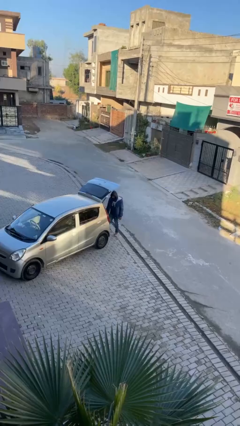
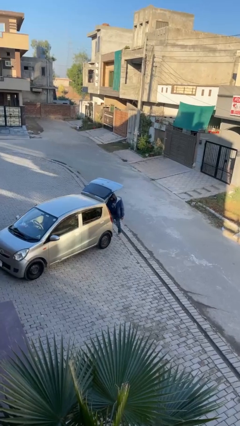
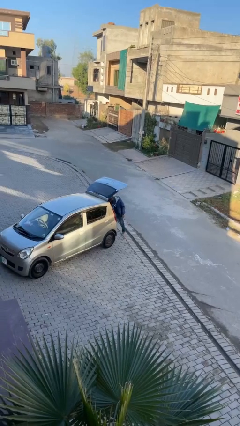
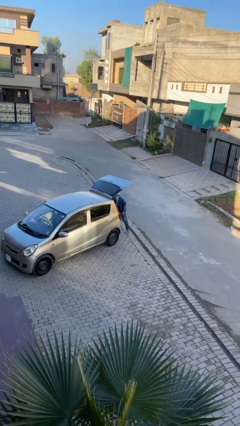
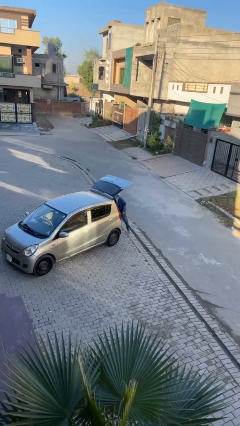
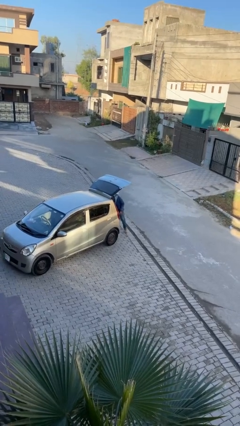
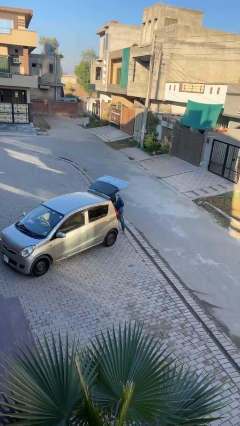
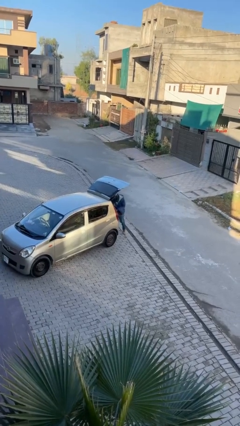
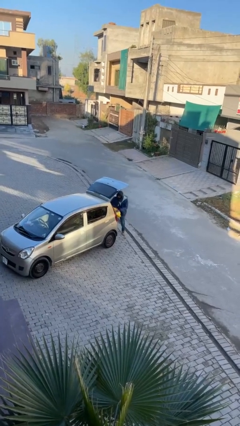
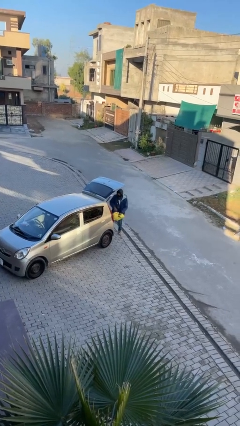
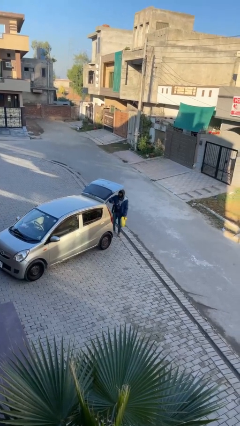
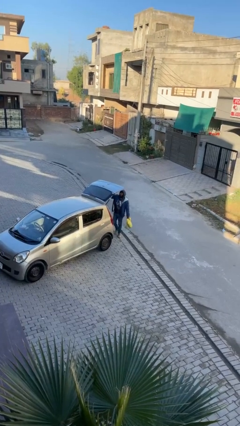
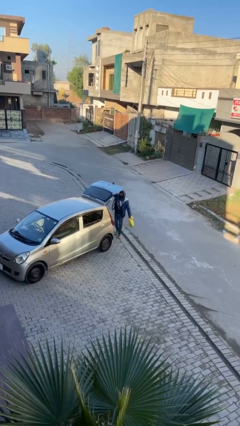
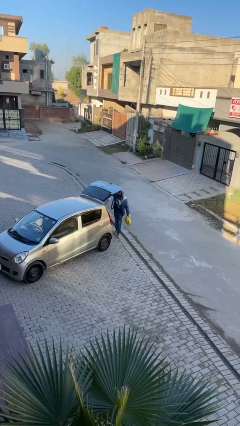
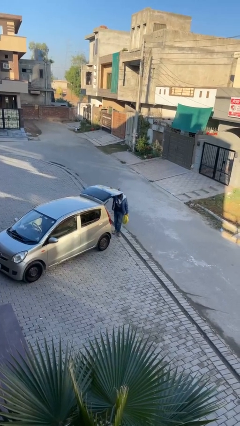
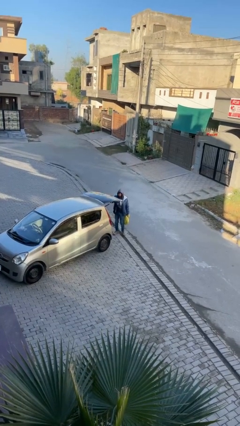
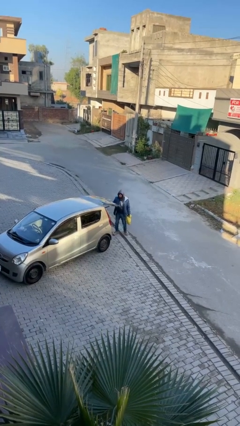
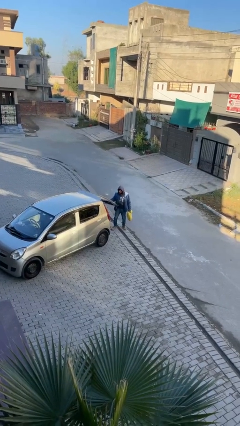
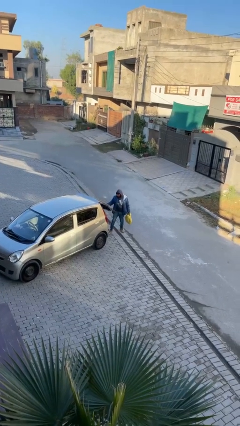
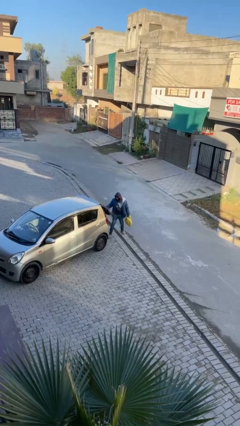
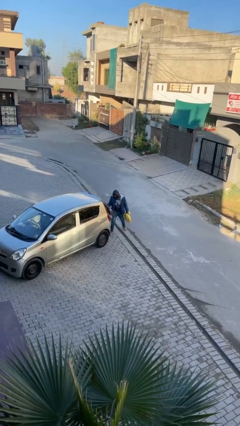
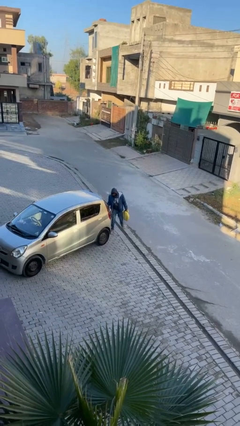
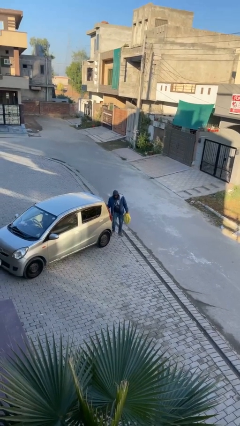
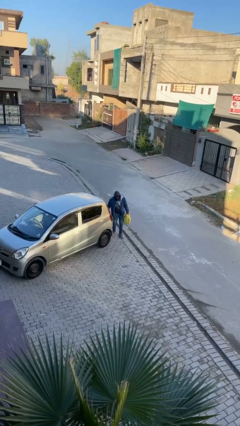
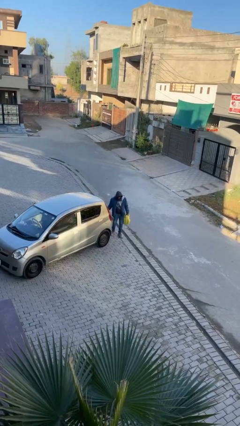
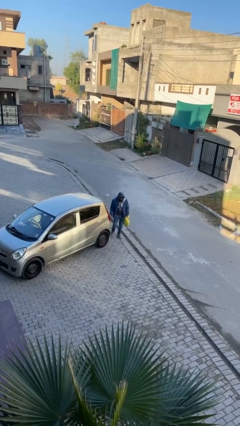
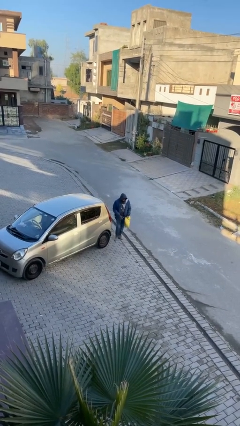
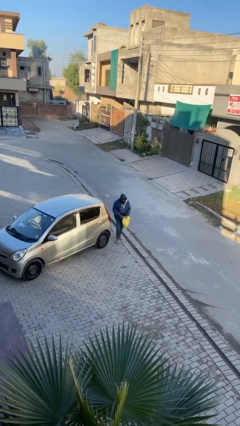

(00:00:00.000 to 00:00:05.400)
person unloads car

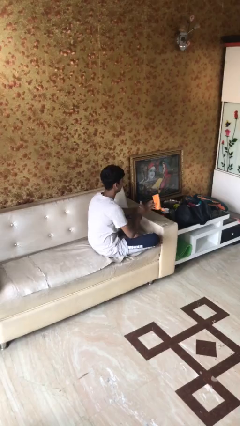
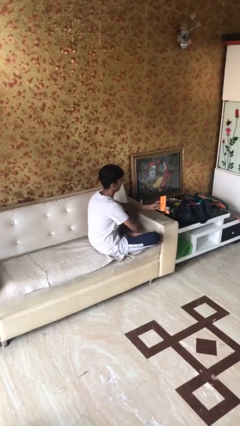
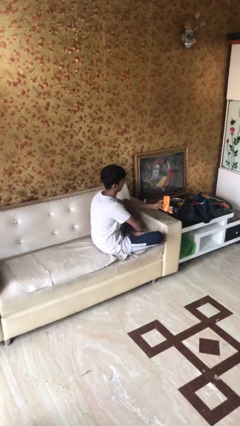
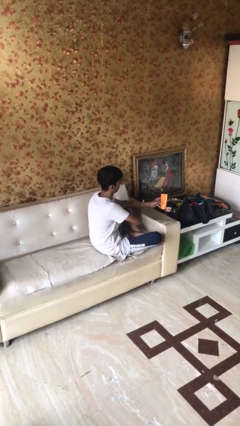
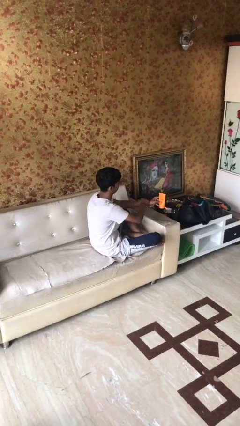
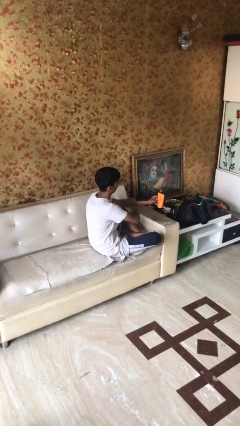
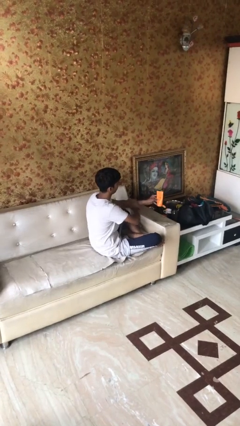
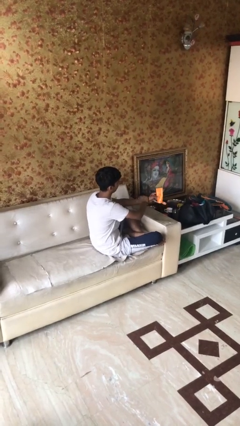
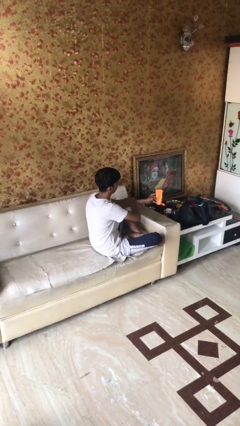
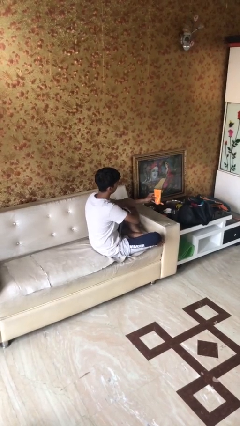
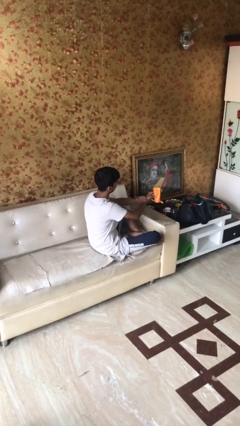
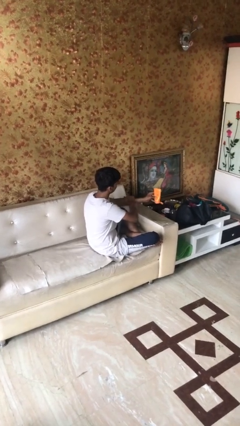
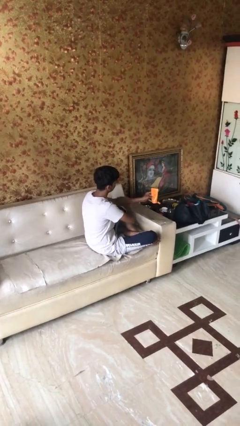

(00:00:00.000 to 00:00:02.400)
person applies sunscreen

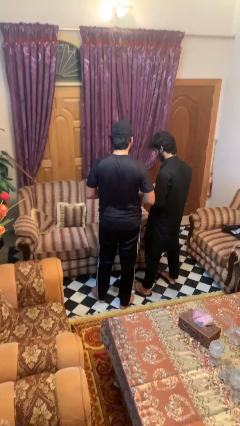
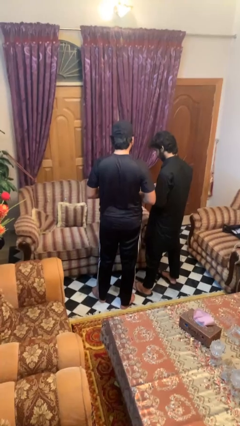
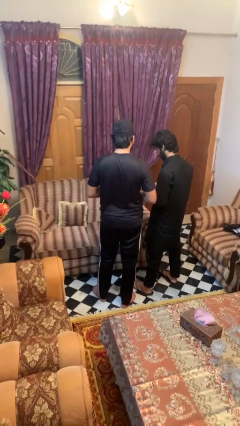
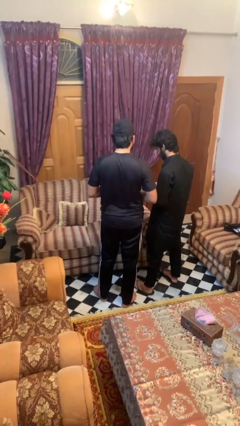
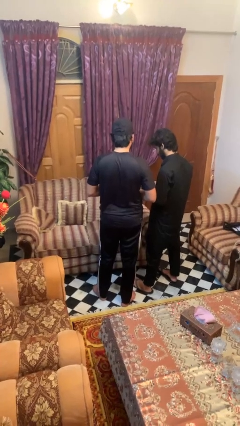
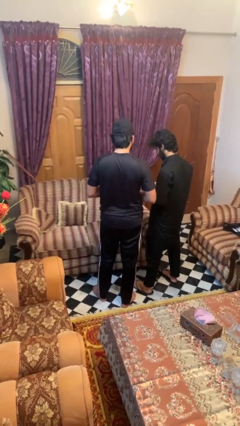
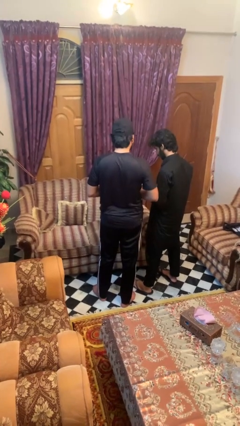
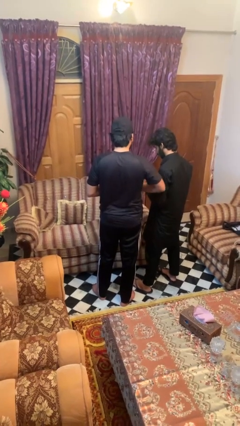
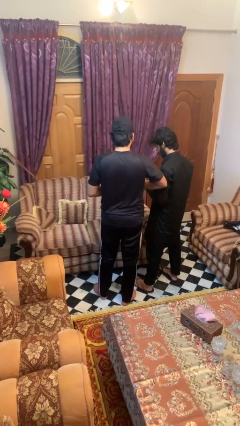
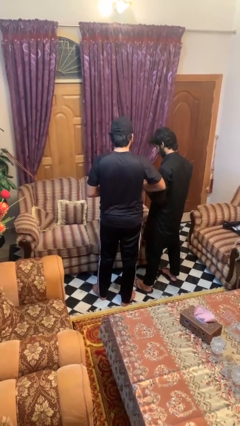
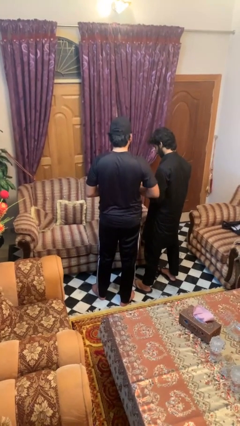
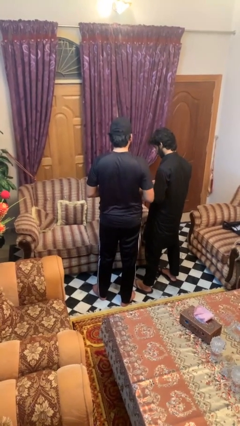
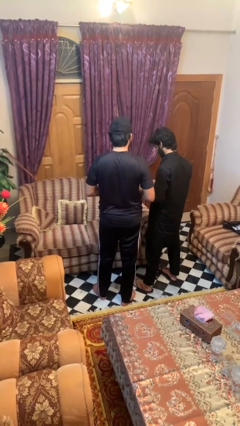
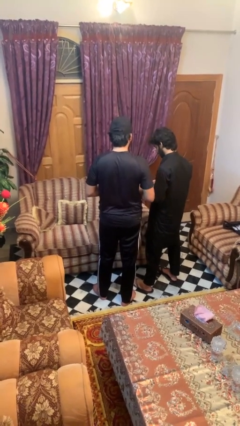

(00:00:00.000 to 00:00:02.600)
person nudges person with elbow

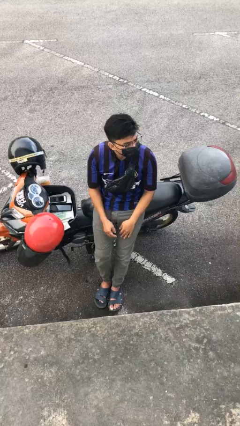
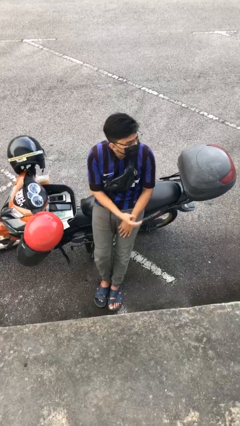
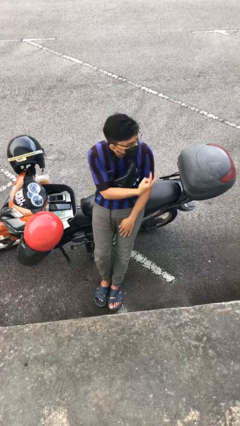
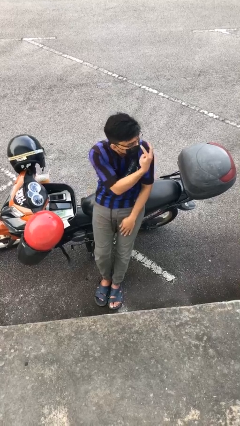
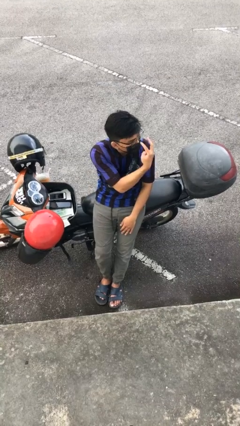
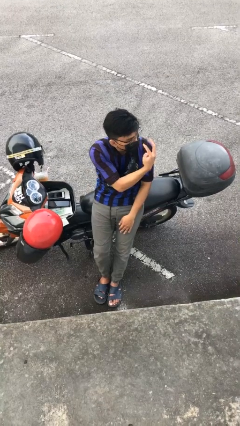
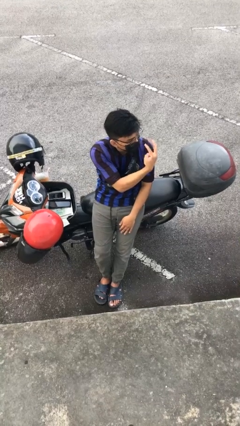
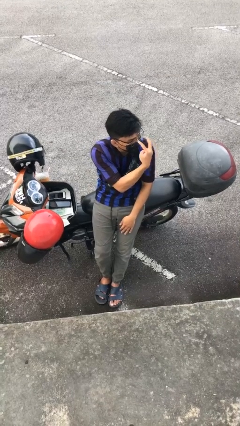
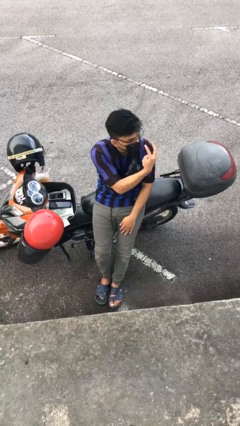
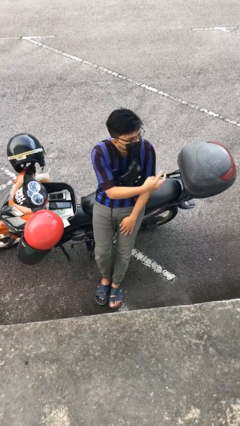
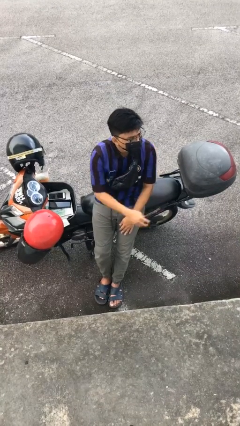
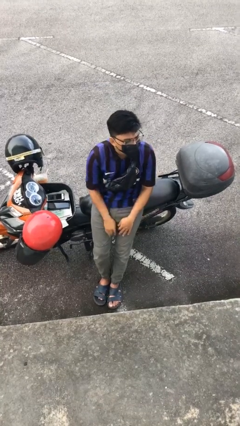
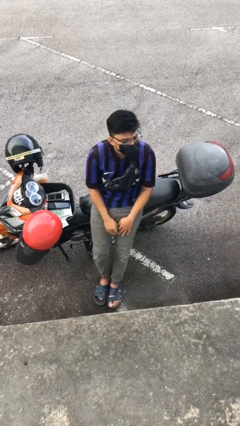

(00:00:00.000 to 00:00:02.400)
person gestures watch closely

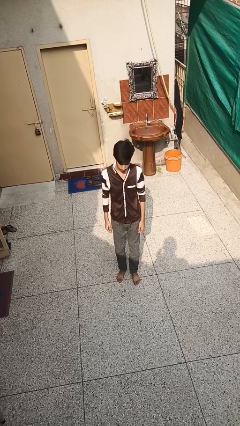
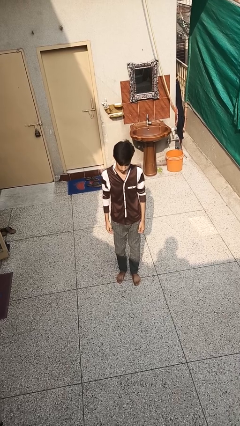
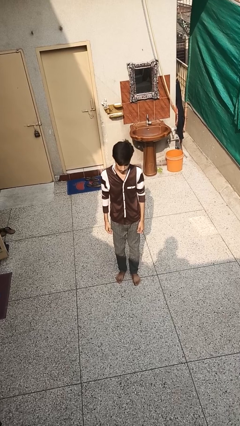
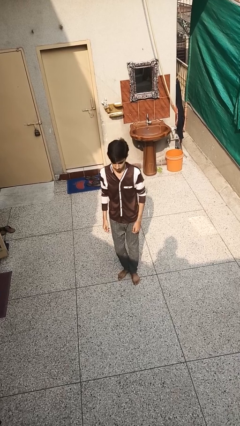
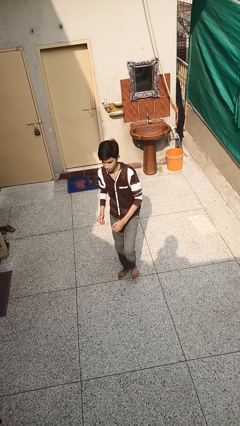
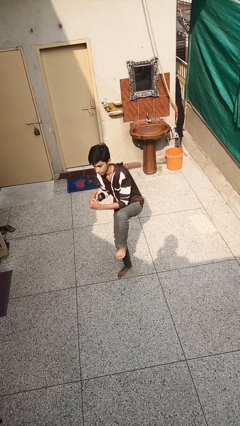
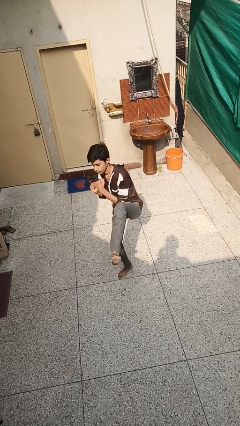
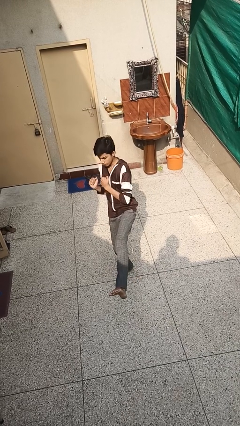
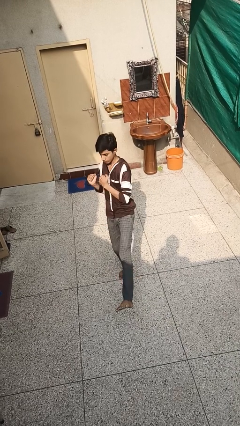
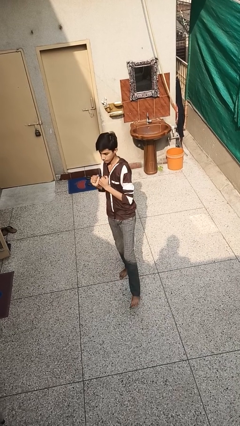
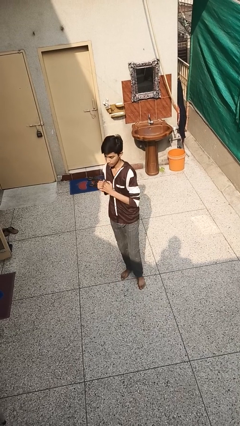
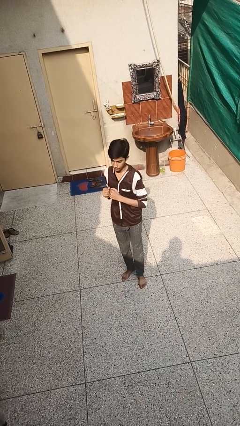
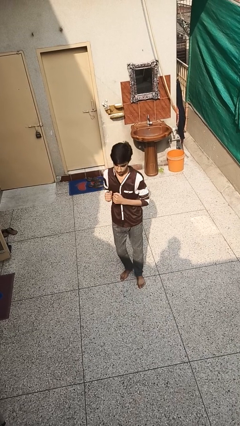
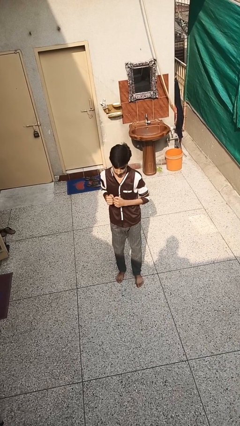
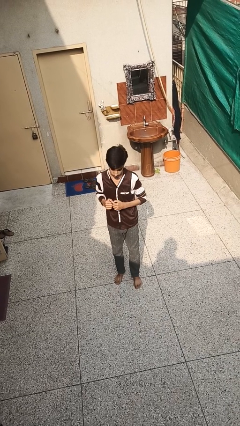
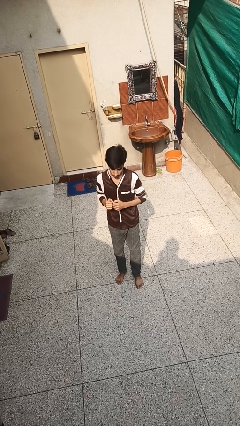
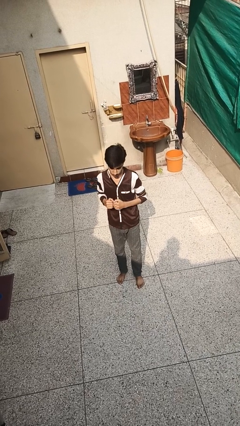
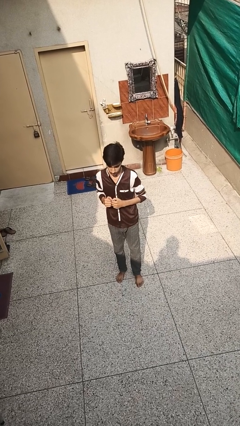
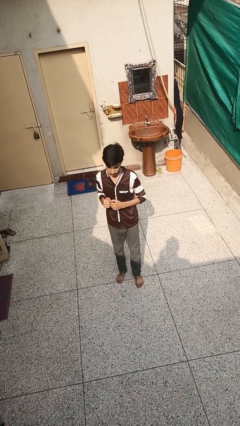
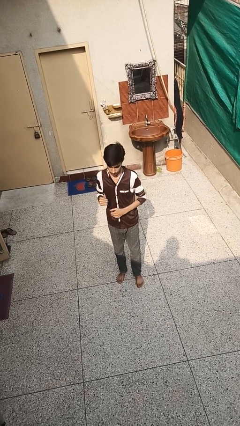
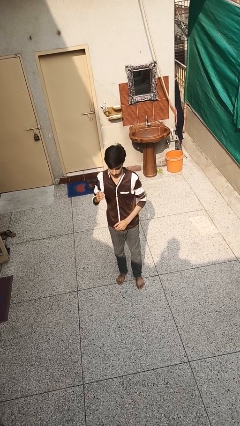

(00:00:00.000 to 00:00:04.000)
person karate kicks

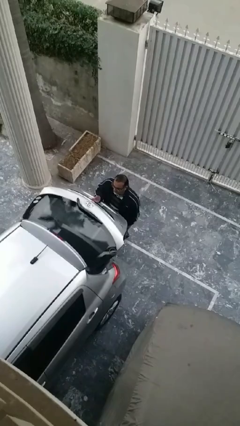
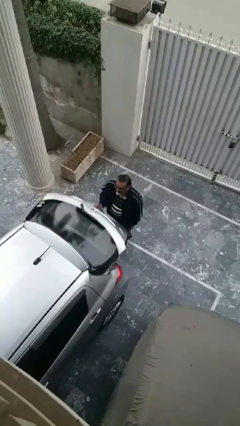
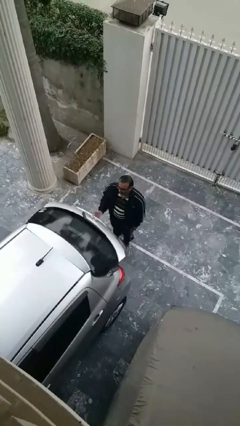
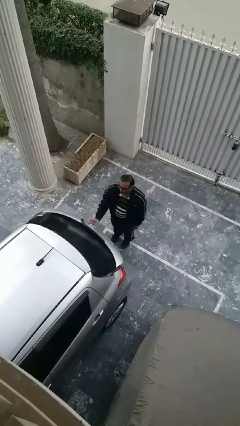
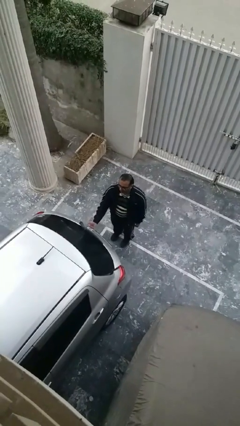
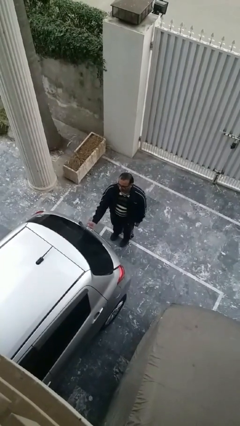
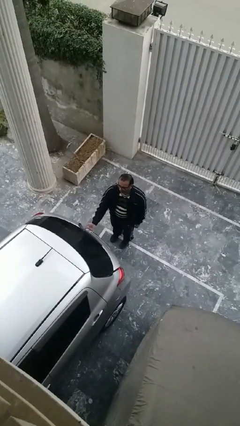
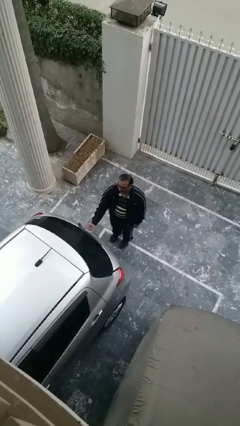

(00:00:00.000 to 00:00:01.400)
person closes car trunk
